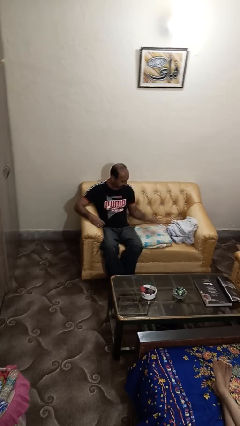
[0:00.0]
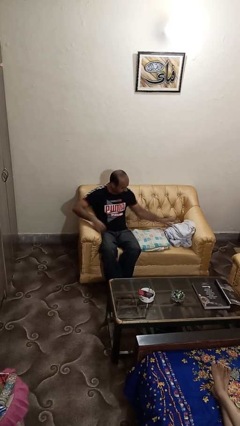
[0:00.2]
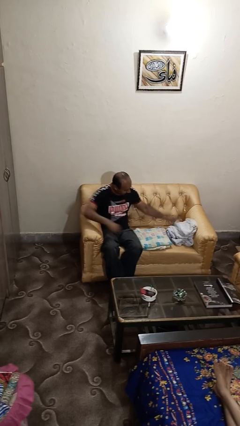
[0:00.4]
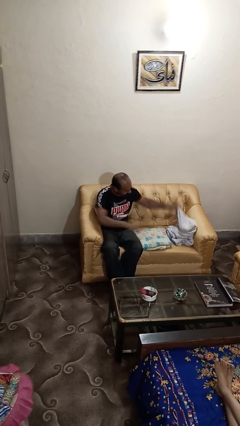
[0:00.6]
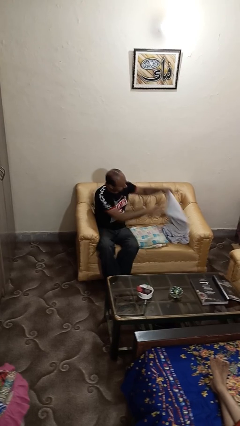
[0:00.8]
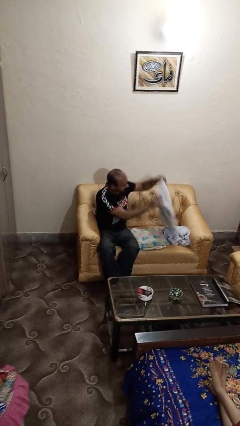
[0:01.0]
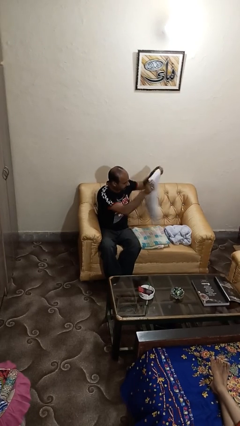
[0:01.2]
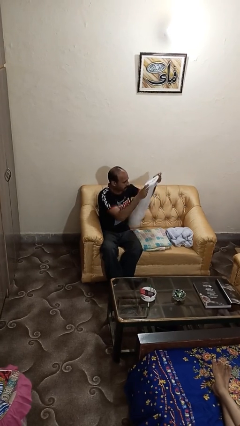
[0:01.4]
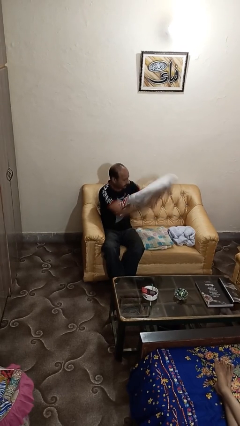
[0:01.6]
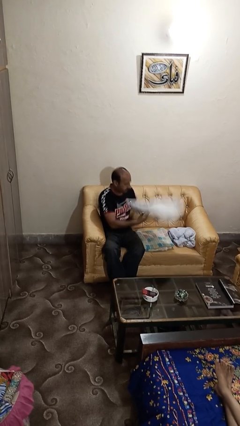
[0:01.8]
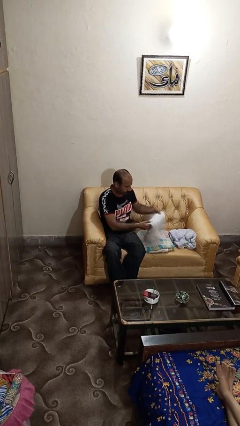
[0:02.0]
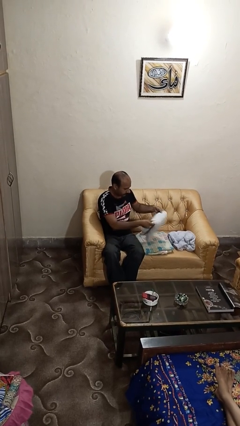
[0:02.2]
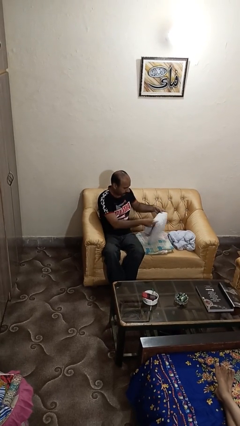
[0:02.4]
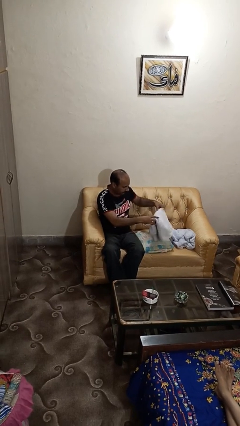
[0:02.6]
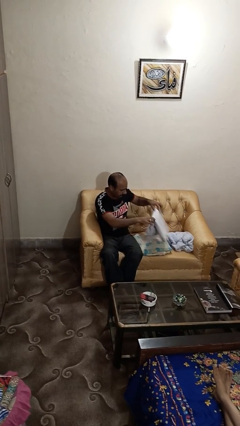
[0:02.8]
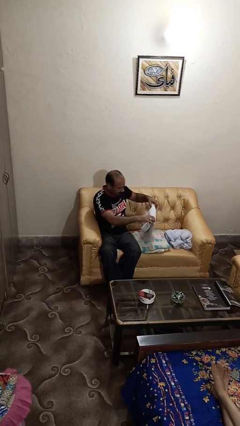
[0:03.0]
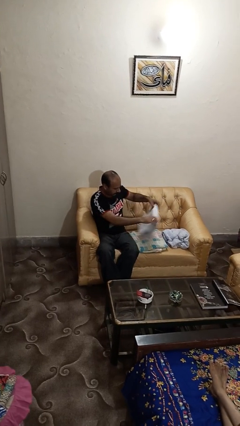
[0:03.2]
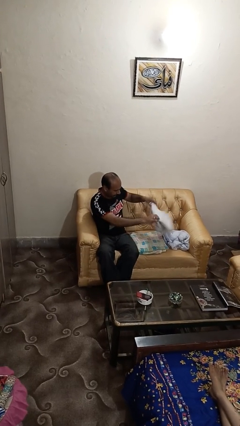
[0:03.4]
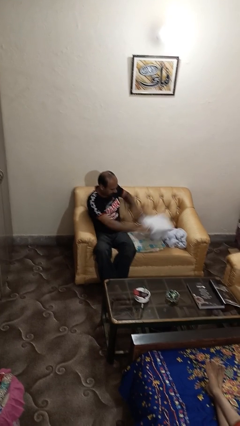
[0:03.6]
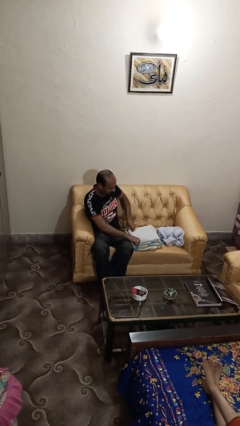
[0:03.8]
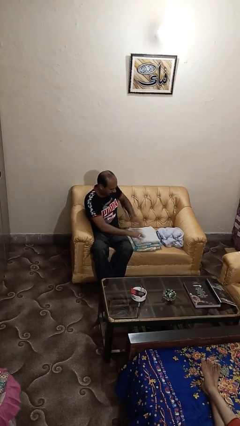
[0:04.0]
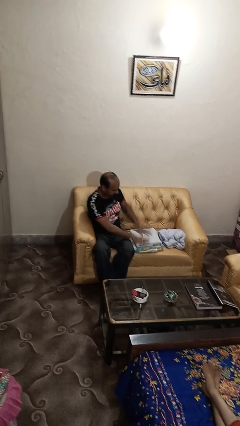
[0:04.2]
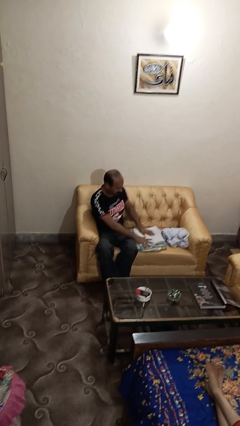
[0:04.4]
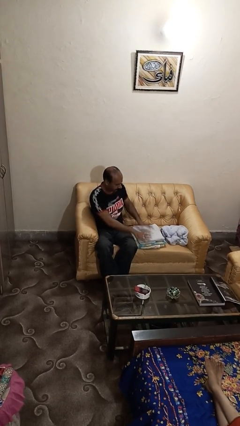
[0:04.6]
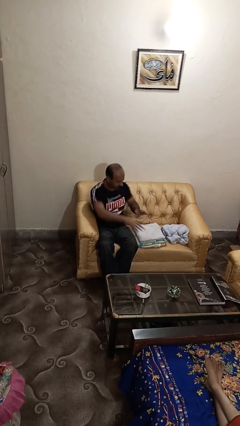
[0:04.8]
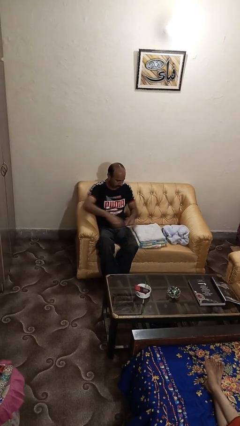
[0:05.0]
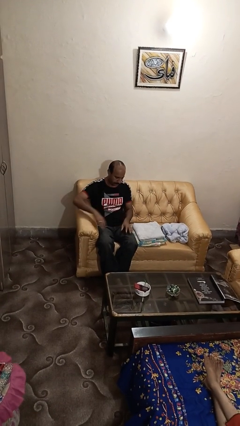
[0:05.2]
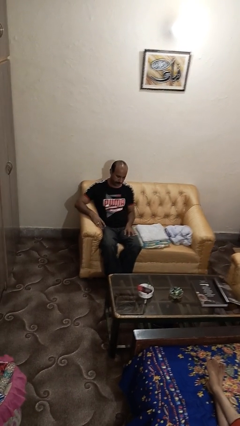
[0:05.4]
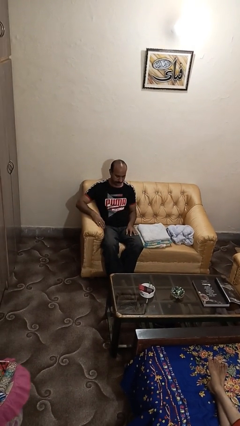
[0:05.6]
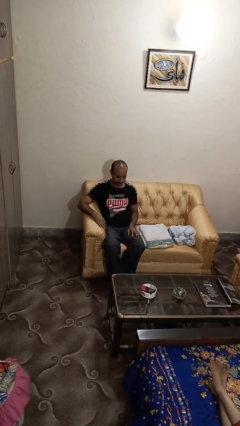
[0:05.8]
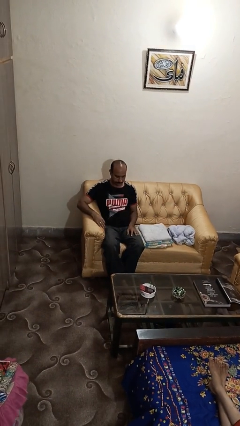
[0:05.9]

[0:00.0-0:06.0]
person folds towel

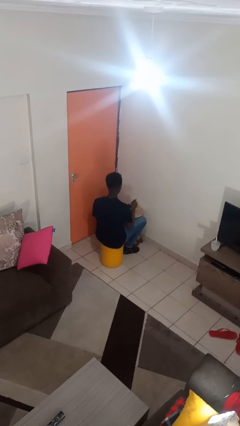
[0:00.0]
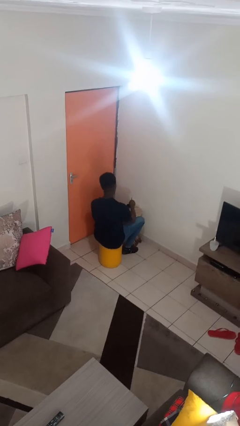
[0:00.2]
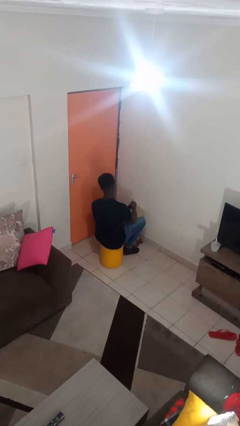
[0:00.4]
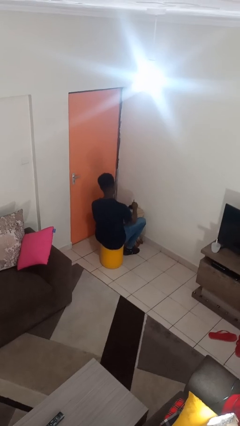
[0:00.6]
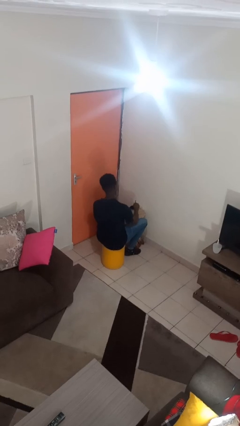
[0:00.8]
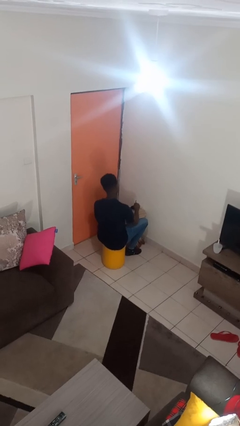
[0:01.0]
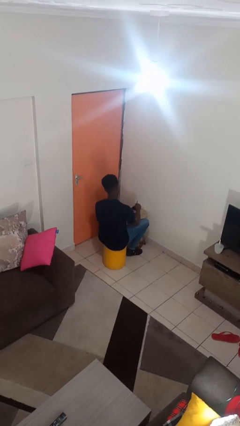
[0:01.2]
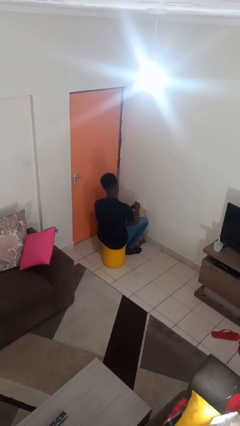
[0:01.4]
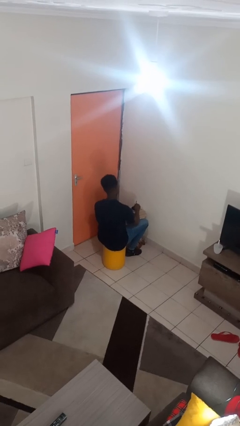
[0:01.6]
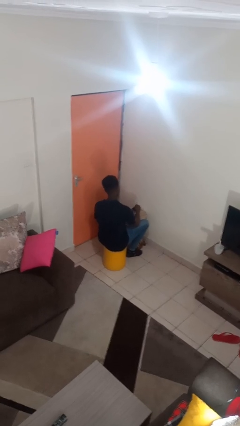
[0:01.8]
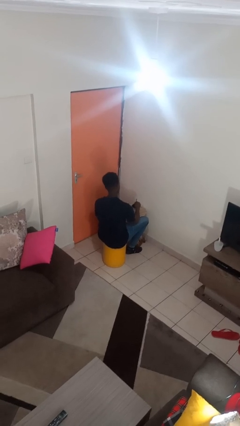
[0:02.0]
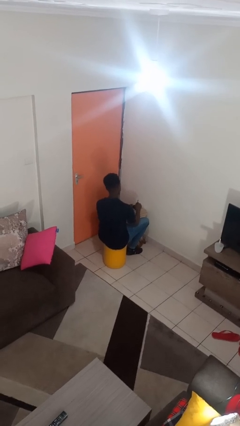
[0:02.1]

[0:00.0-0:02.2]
person stirs mug

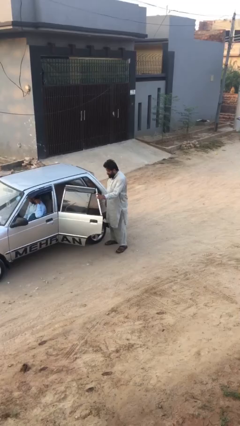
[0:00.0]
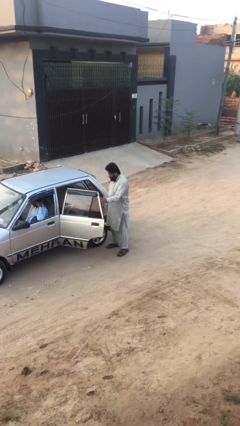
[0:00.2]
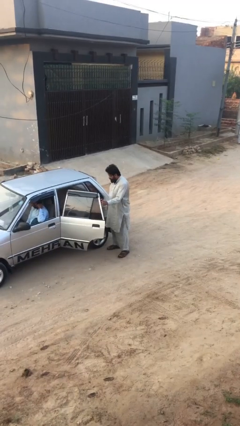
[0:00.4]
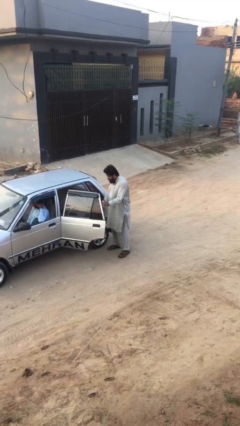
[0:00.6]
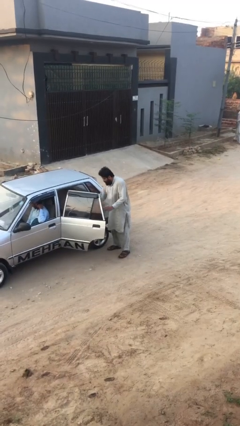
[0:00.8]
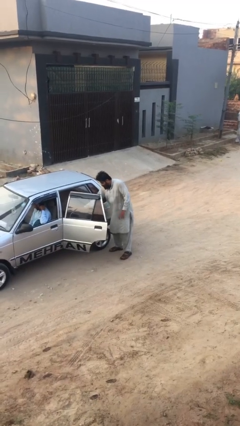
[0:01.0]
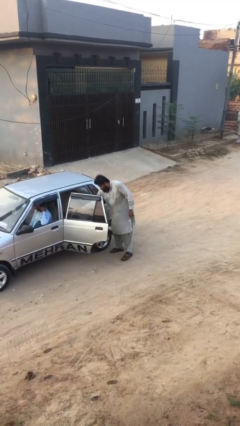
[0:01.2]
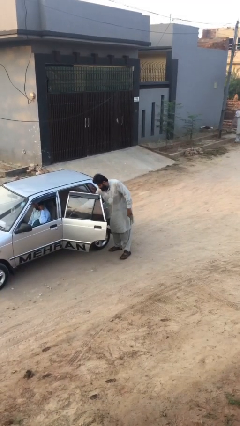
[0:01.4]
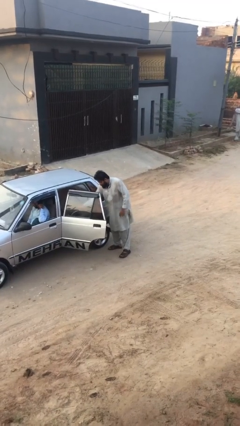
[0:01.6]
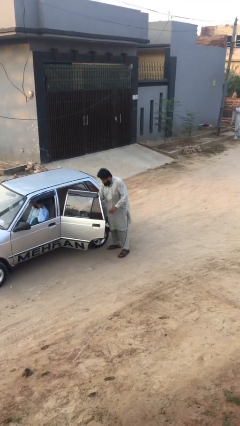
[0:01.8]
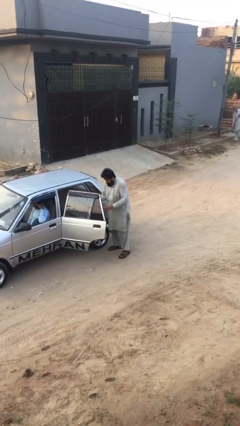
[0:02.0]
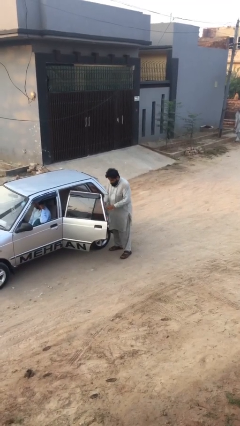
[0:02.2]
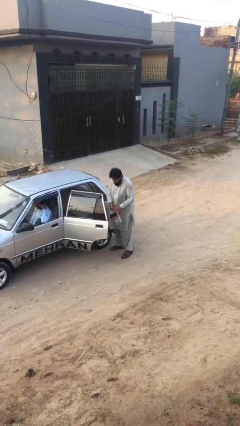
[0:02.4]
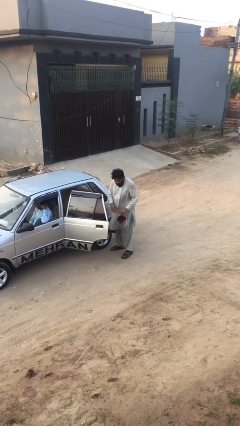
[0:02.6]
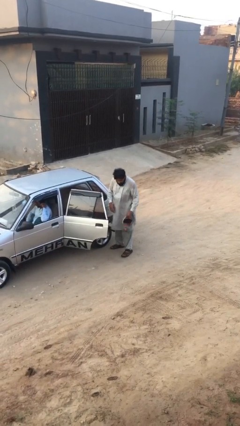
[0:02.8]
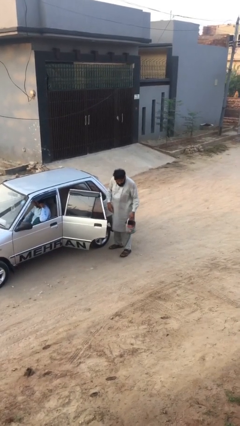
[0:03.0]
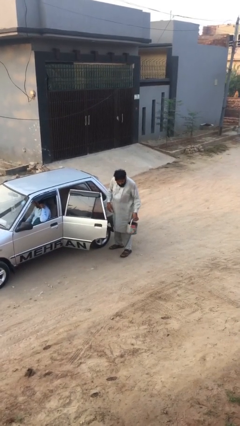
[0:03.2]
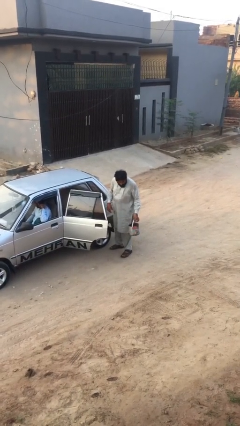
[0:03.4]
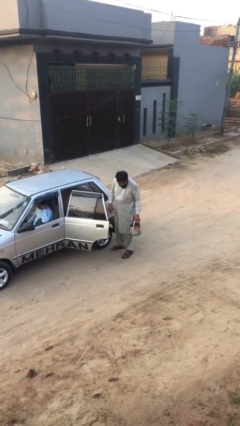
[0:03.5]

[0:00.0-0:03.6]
person unloads car

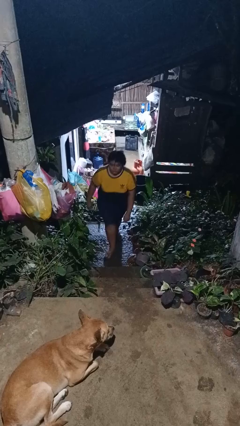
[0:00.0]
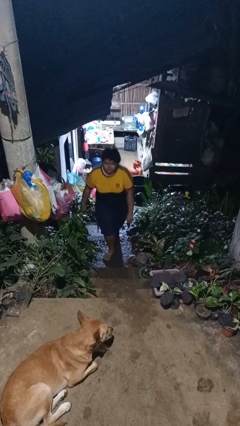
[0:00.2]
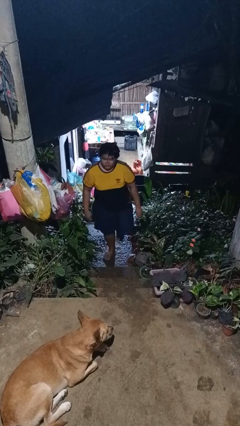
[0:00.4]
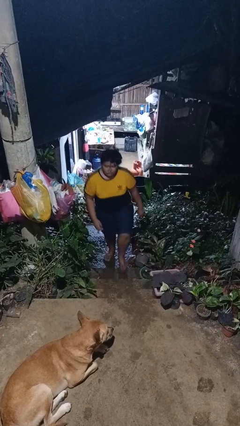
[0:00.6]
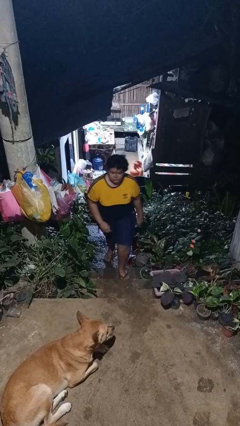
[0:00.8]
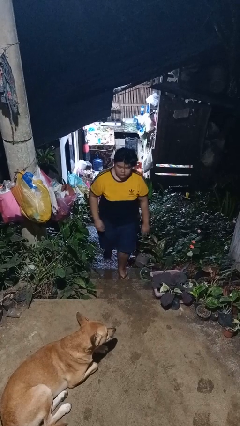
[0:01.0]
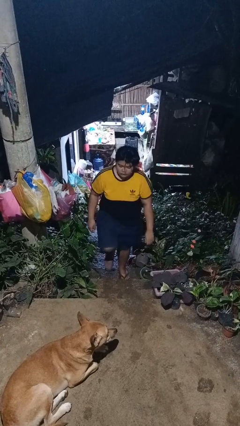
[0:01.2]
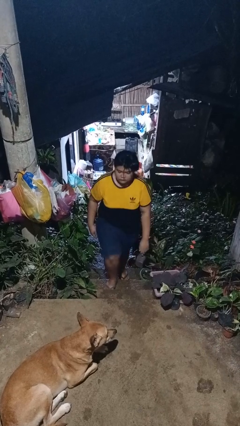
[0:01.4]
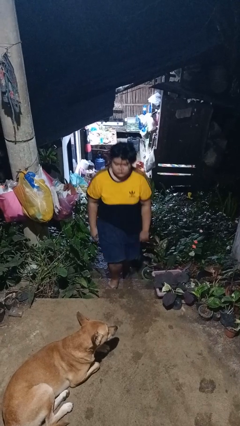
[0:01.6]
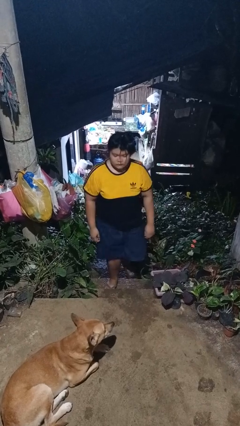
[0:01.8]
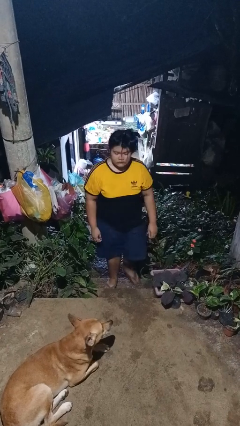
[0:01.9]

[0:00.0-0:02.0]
person climbs up stairs

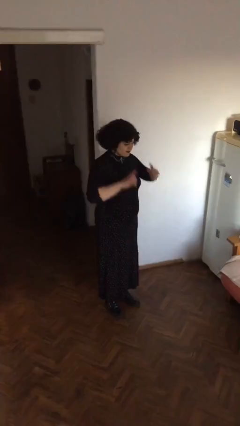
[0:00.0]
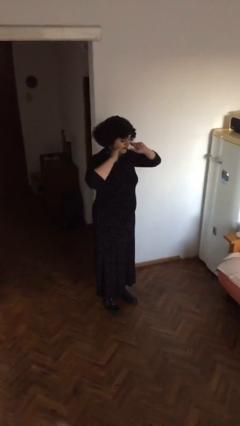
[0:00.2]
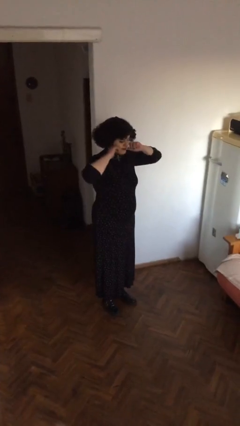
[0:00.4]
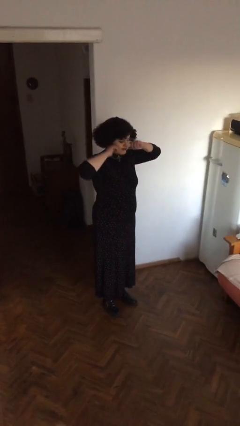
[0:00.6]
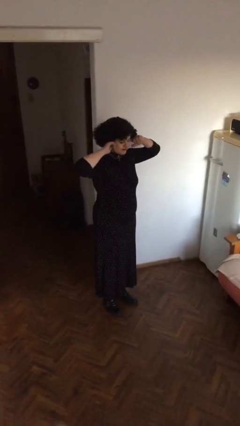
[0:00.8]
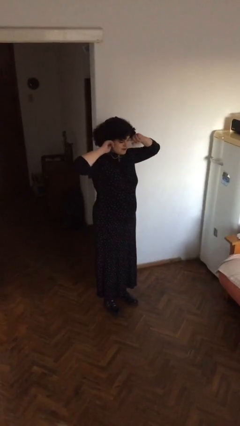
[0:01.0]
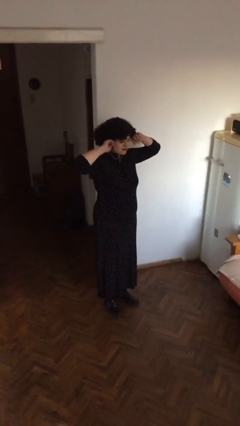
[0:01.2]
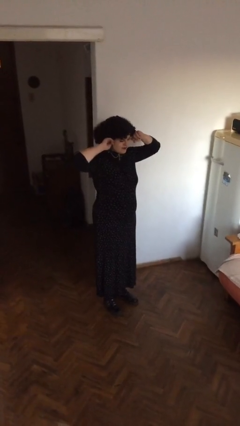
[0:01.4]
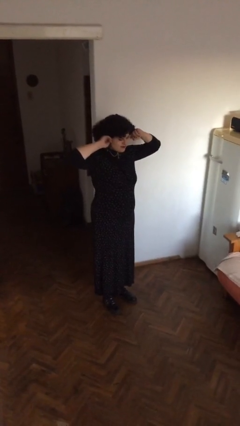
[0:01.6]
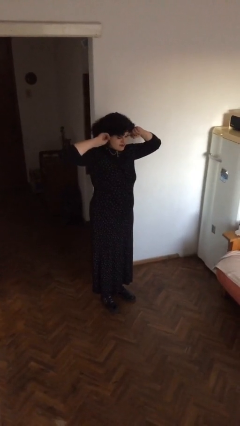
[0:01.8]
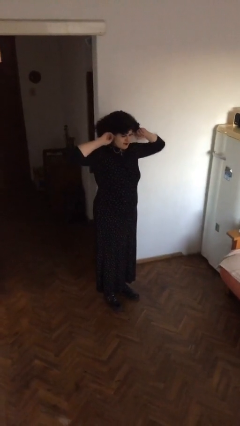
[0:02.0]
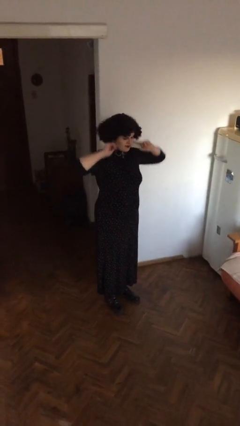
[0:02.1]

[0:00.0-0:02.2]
person puts fingers in ear

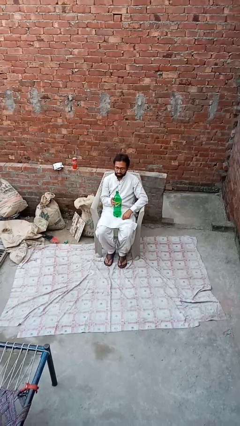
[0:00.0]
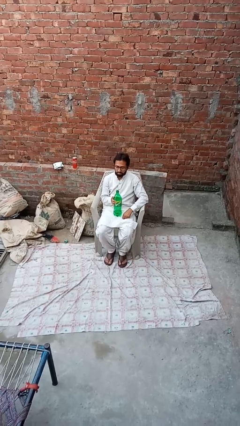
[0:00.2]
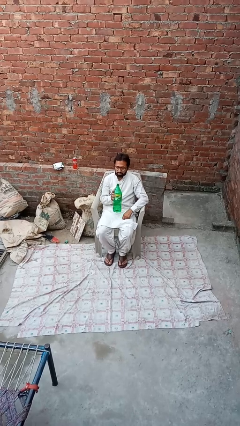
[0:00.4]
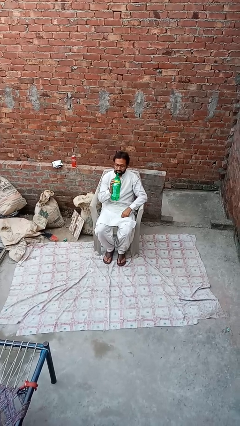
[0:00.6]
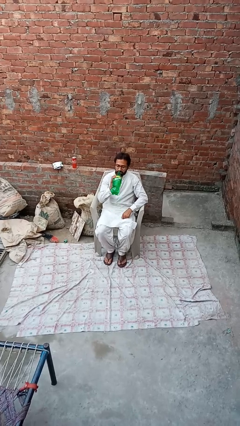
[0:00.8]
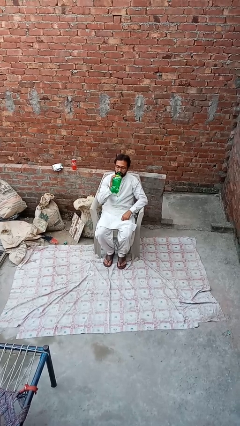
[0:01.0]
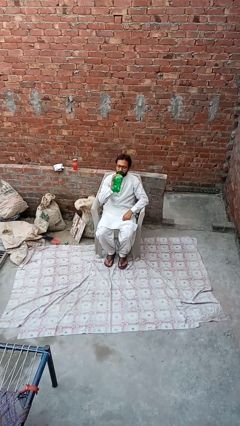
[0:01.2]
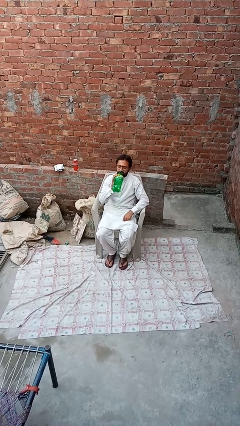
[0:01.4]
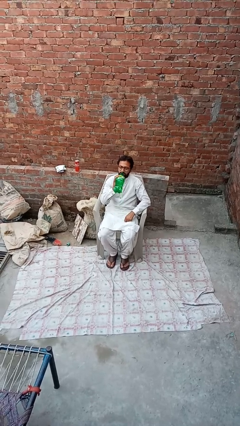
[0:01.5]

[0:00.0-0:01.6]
person drinks from bottle
